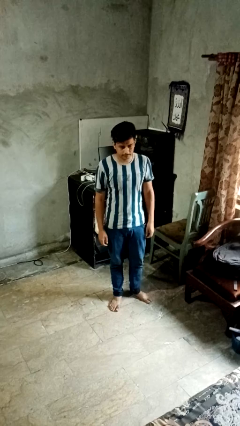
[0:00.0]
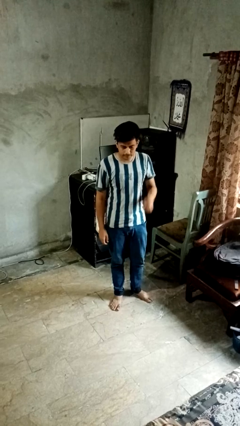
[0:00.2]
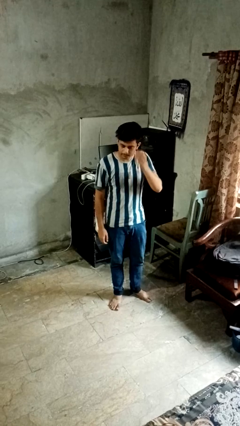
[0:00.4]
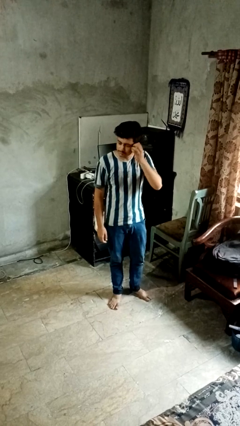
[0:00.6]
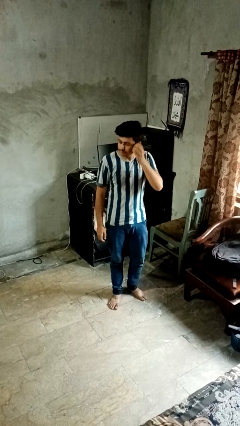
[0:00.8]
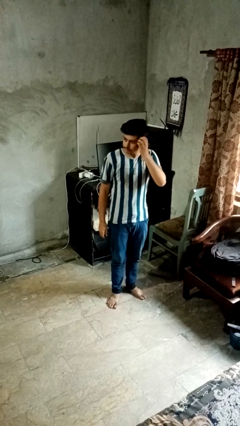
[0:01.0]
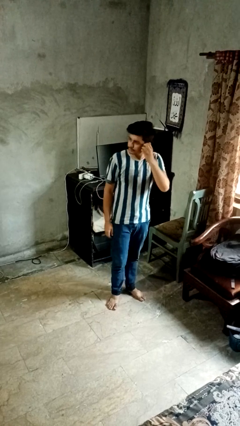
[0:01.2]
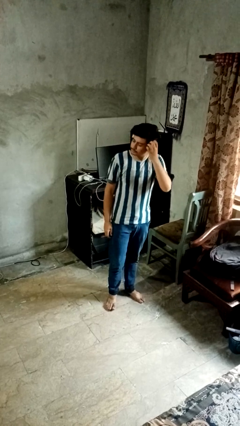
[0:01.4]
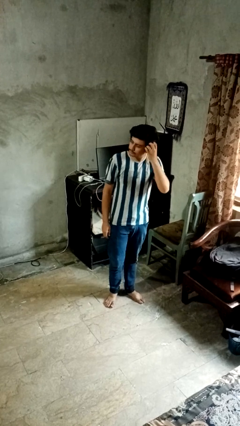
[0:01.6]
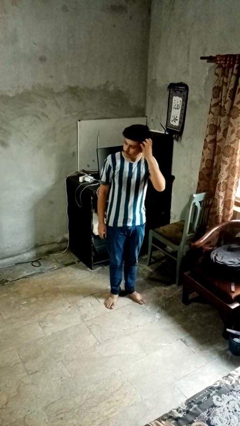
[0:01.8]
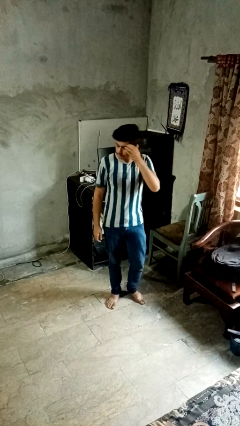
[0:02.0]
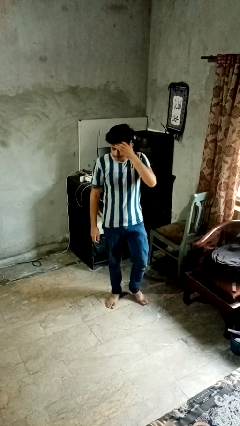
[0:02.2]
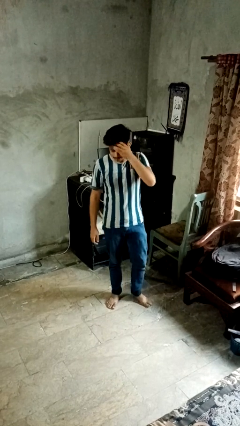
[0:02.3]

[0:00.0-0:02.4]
person scratches face

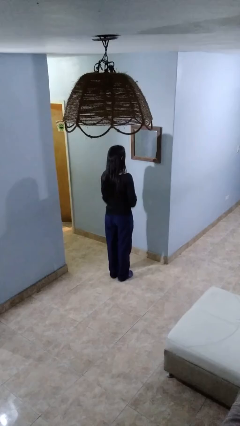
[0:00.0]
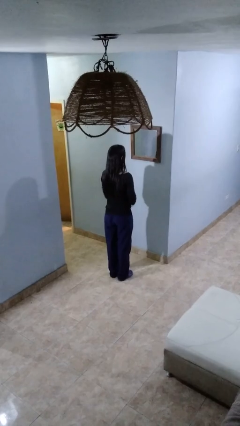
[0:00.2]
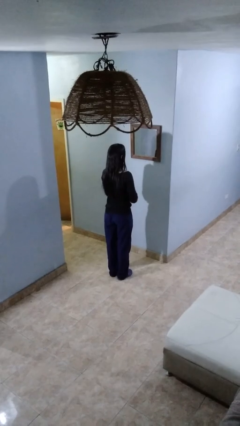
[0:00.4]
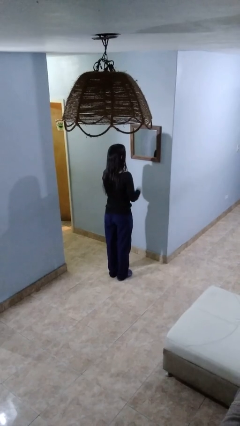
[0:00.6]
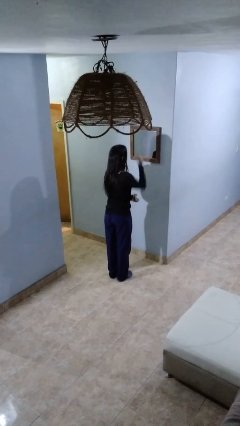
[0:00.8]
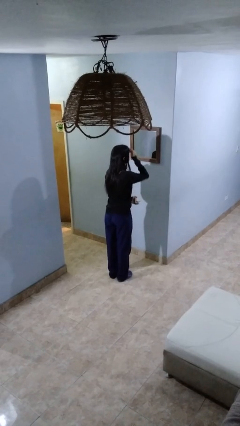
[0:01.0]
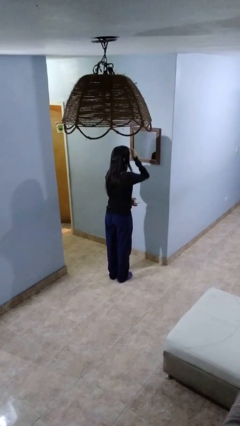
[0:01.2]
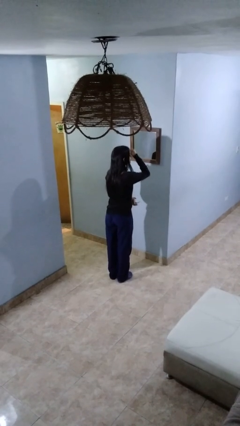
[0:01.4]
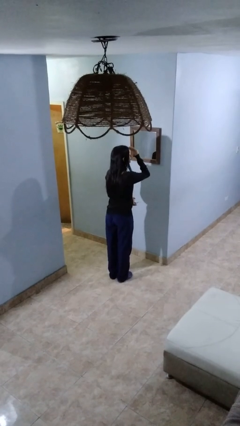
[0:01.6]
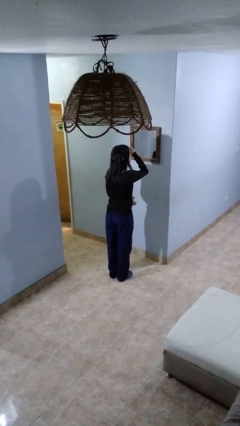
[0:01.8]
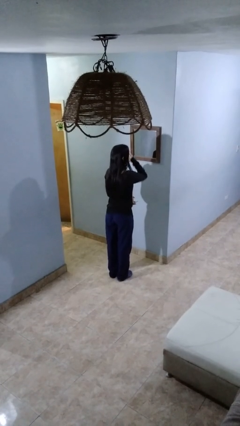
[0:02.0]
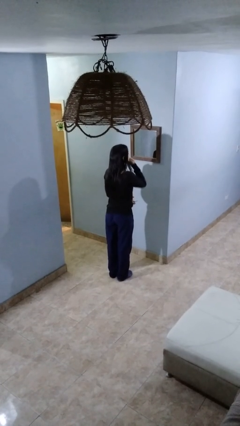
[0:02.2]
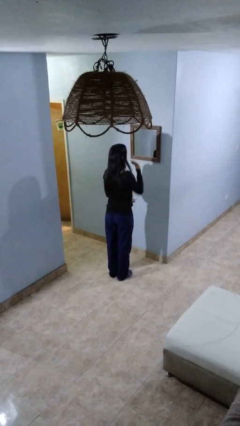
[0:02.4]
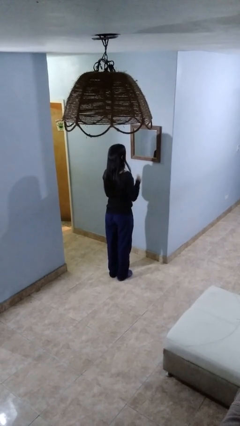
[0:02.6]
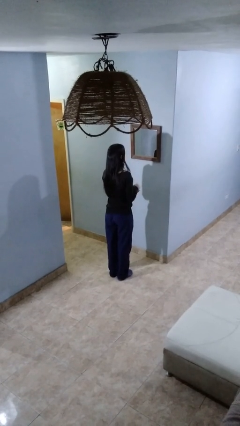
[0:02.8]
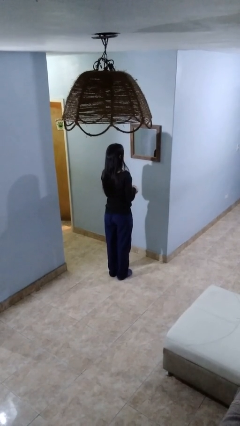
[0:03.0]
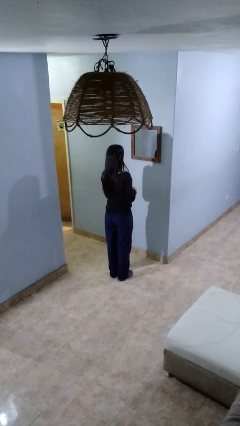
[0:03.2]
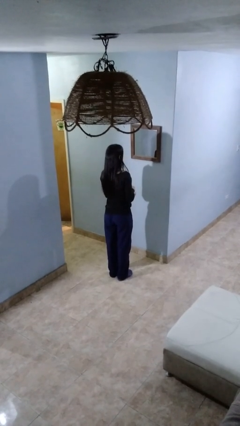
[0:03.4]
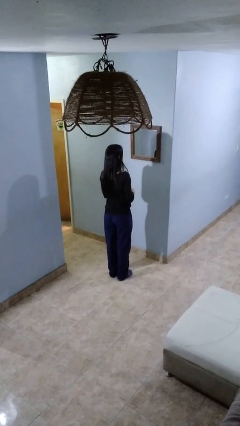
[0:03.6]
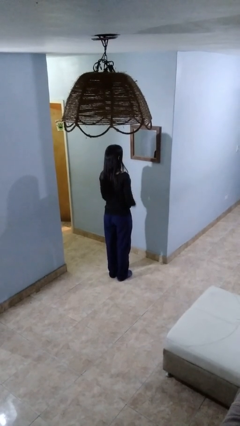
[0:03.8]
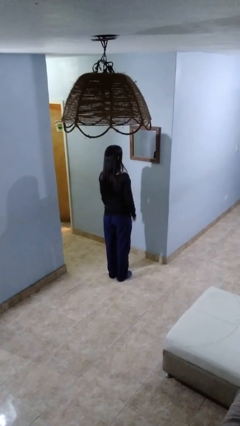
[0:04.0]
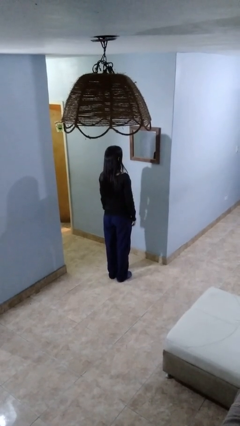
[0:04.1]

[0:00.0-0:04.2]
person applies foundation makeup

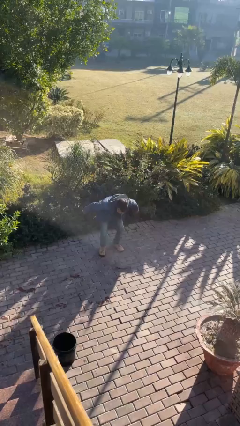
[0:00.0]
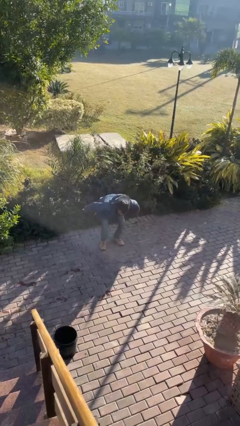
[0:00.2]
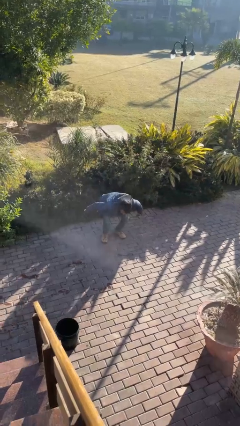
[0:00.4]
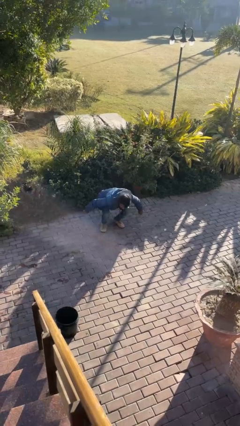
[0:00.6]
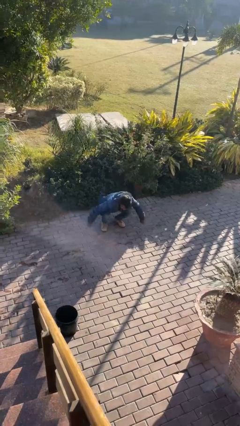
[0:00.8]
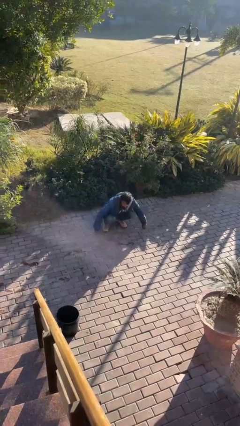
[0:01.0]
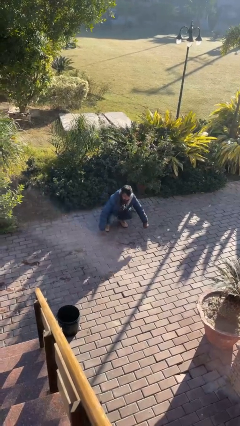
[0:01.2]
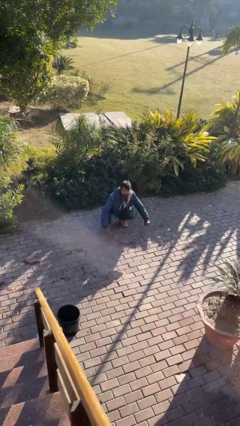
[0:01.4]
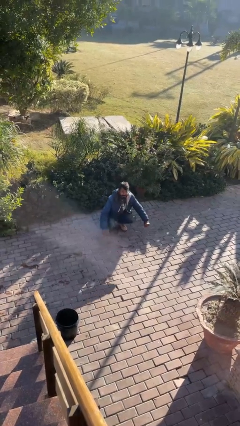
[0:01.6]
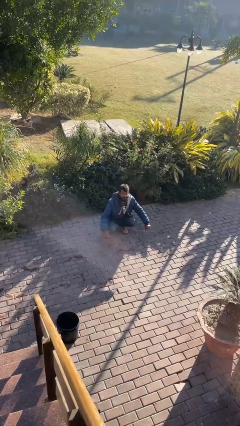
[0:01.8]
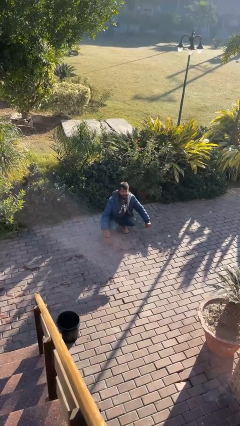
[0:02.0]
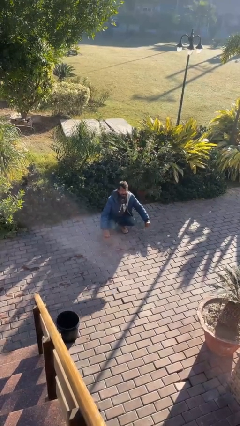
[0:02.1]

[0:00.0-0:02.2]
person sits down

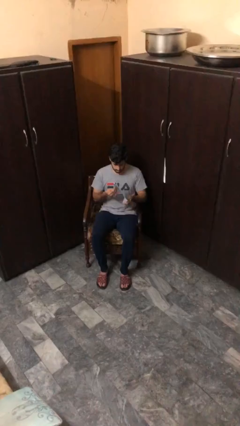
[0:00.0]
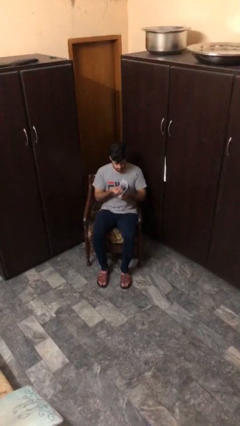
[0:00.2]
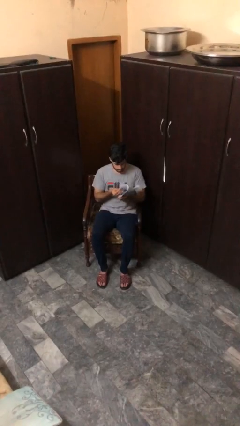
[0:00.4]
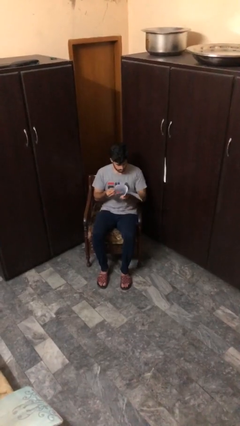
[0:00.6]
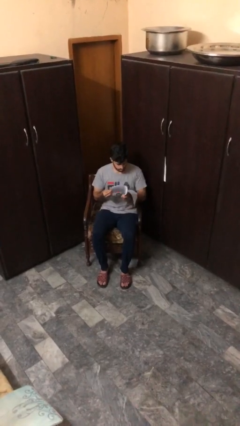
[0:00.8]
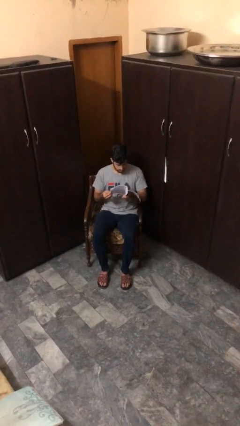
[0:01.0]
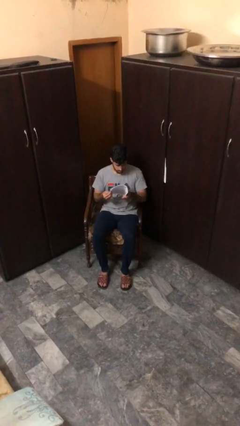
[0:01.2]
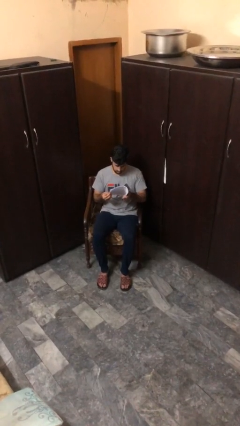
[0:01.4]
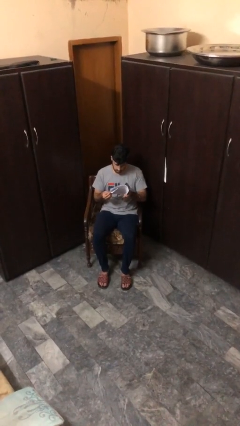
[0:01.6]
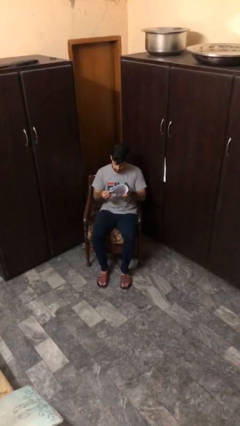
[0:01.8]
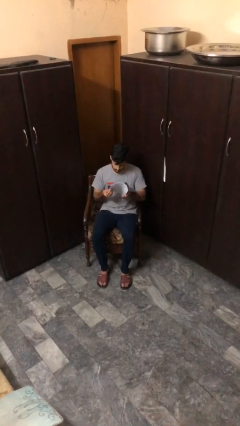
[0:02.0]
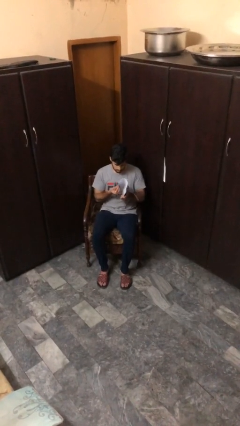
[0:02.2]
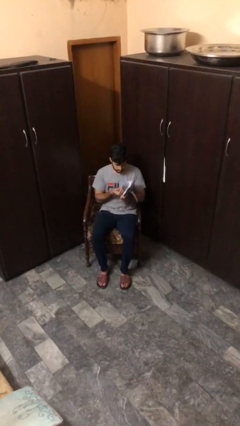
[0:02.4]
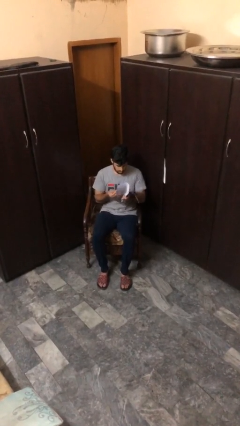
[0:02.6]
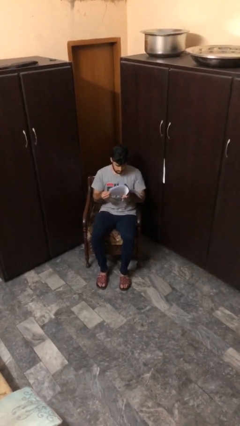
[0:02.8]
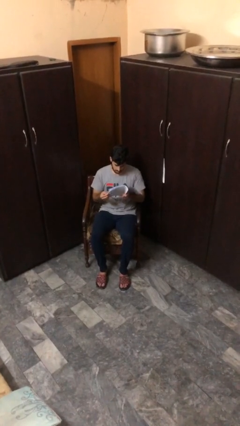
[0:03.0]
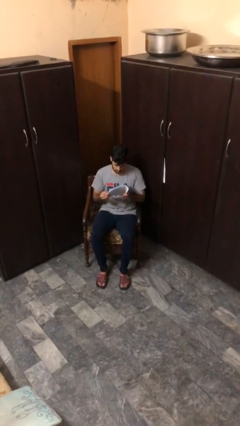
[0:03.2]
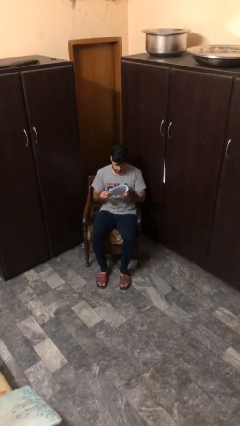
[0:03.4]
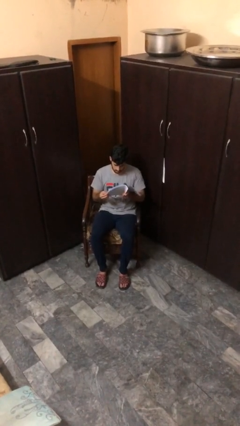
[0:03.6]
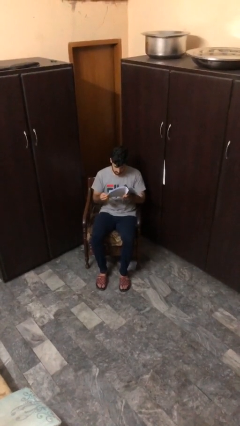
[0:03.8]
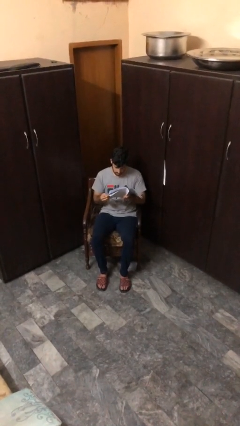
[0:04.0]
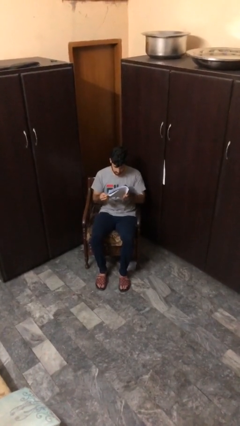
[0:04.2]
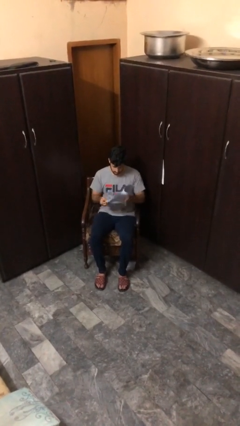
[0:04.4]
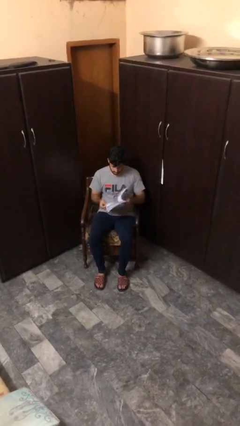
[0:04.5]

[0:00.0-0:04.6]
person reads magazine

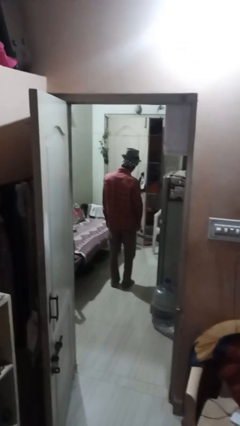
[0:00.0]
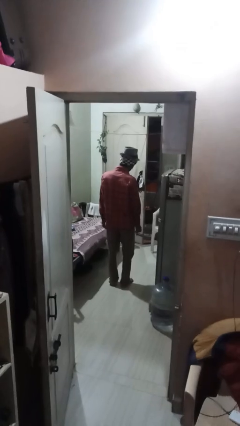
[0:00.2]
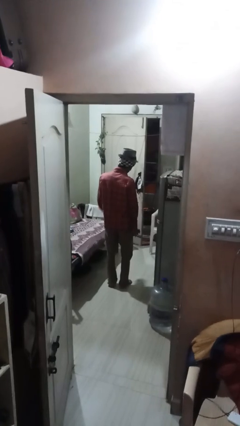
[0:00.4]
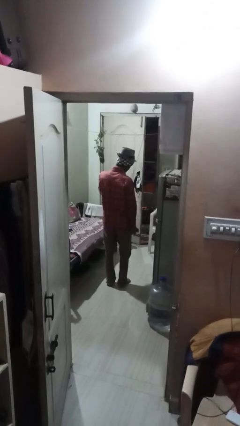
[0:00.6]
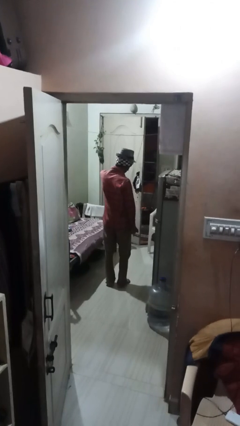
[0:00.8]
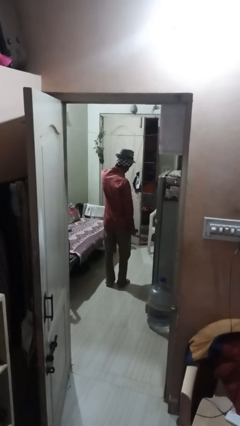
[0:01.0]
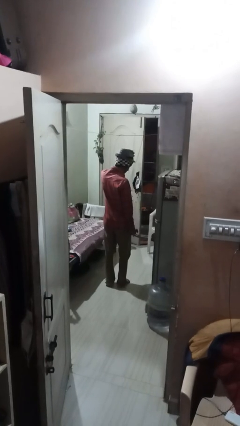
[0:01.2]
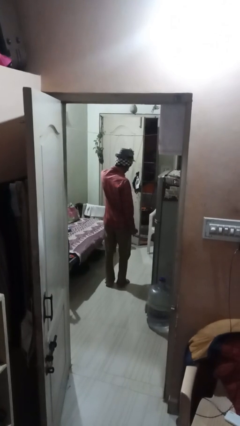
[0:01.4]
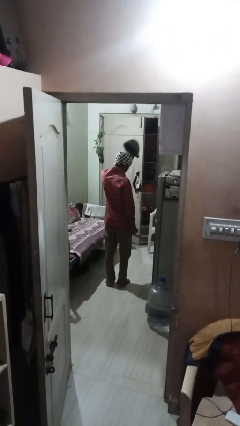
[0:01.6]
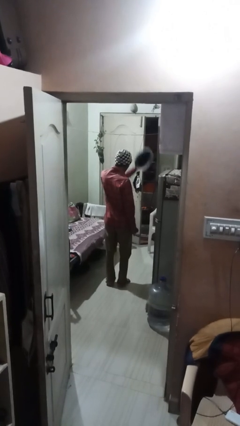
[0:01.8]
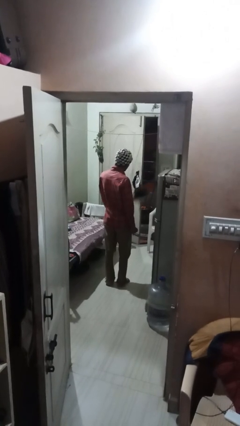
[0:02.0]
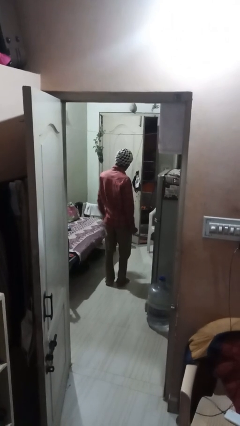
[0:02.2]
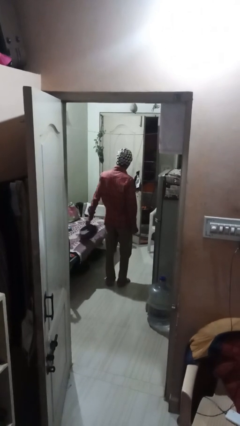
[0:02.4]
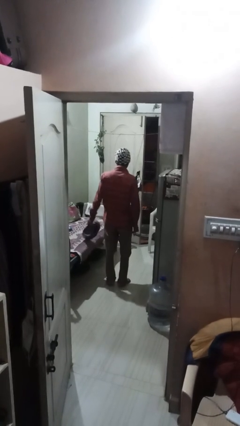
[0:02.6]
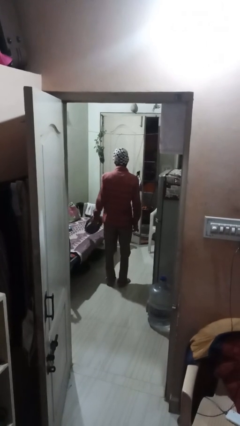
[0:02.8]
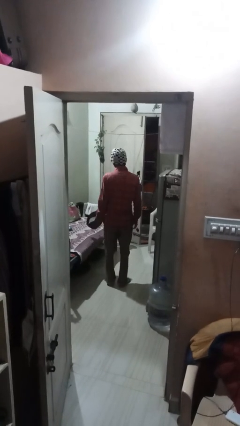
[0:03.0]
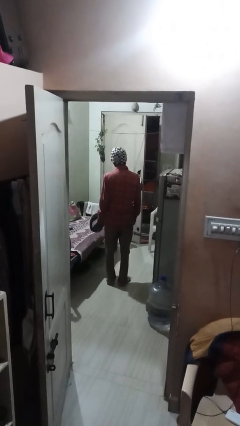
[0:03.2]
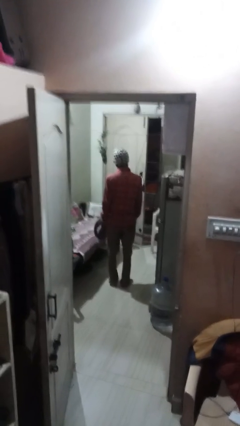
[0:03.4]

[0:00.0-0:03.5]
person takes off hat

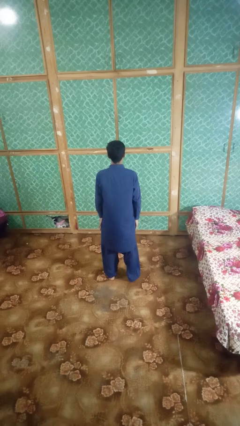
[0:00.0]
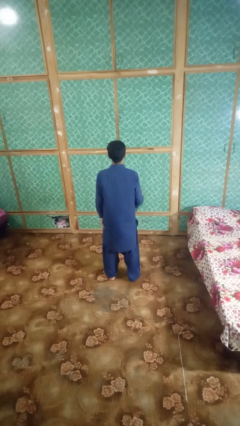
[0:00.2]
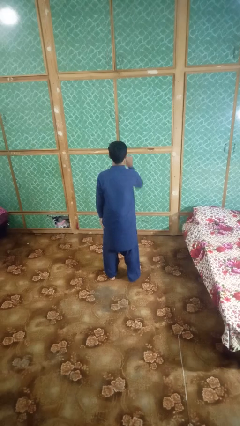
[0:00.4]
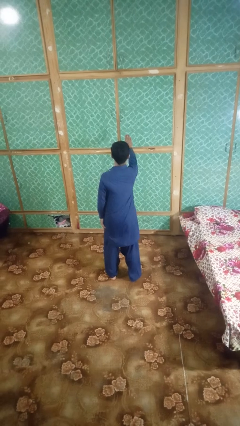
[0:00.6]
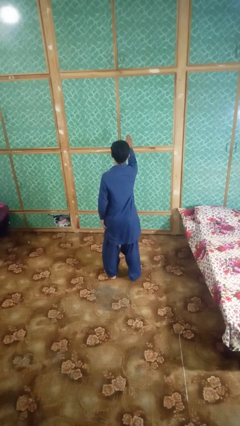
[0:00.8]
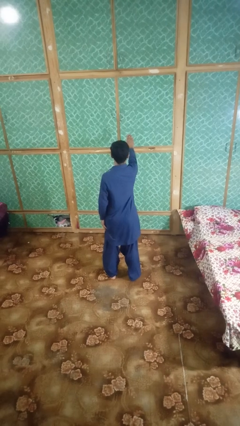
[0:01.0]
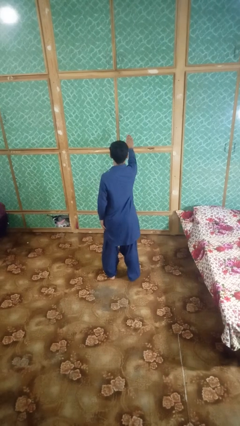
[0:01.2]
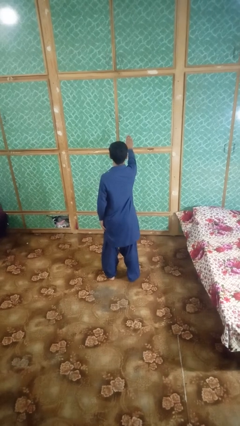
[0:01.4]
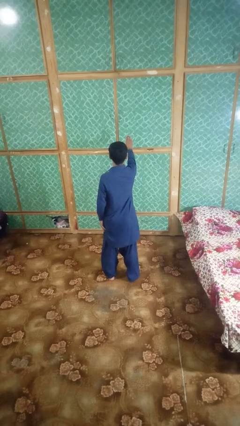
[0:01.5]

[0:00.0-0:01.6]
person gestures stop
